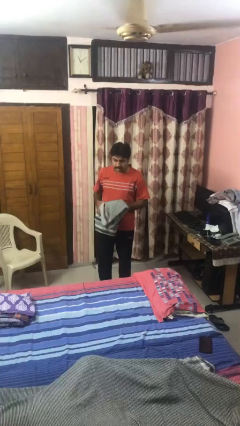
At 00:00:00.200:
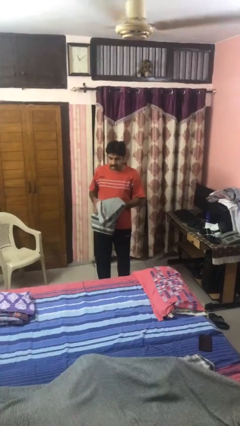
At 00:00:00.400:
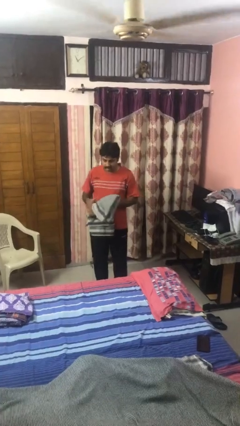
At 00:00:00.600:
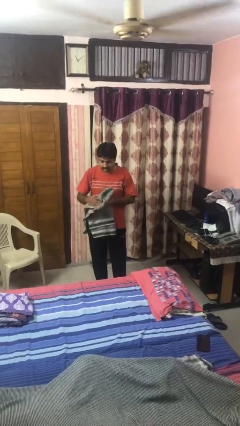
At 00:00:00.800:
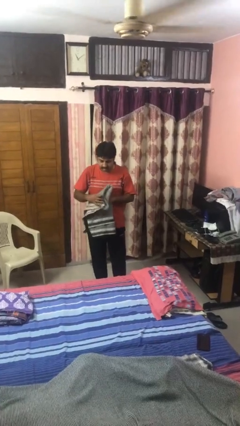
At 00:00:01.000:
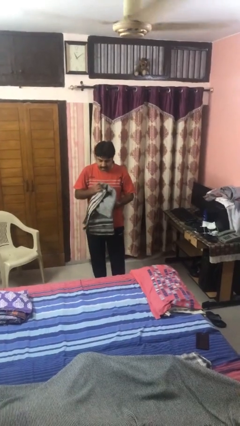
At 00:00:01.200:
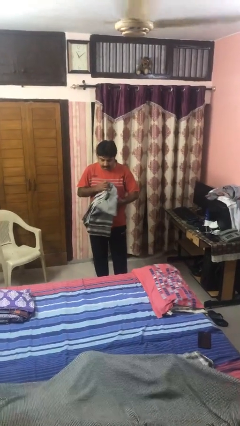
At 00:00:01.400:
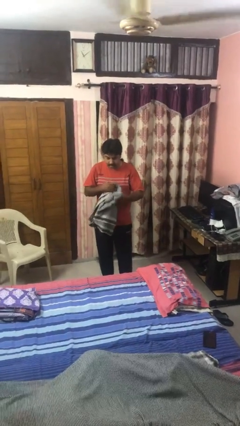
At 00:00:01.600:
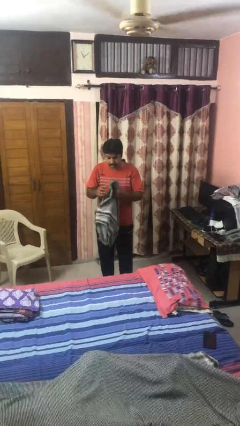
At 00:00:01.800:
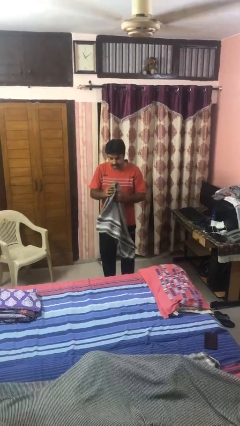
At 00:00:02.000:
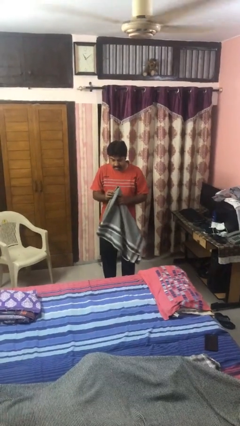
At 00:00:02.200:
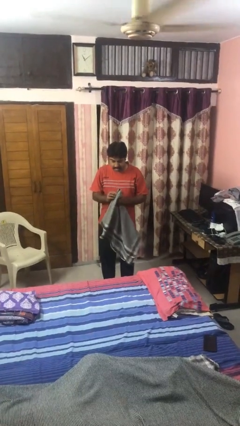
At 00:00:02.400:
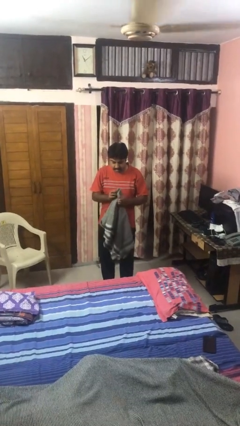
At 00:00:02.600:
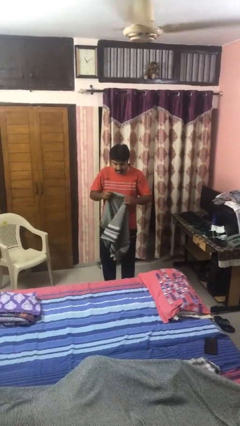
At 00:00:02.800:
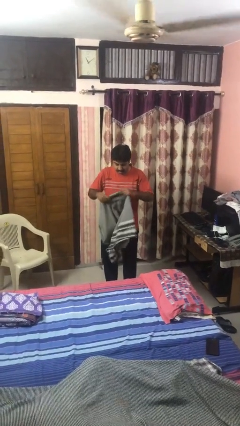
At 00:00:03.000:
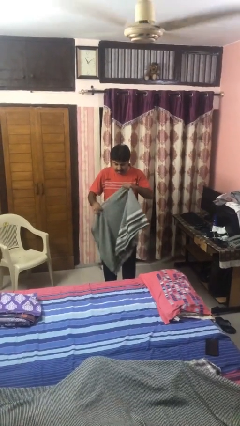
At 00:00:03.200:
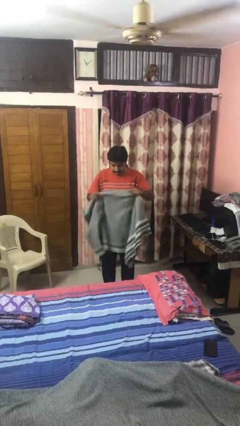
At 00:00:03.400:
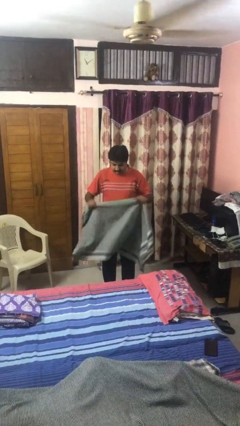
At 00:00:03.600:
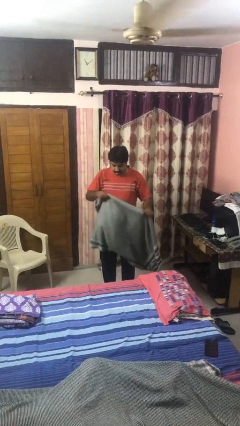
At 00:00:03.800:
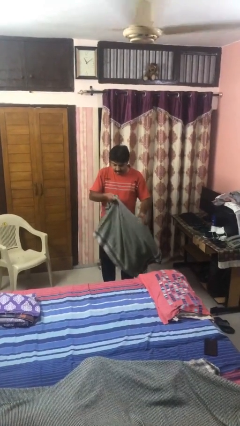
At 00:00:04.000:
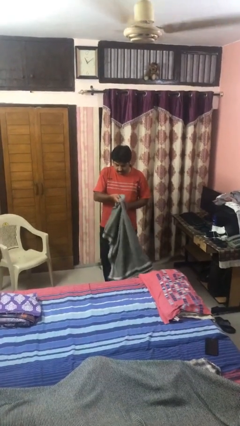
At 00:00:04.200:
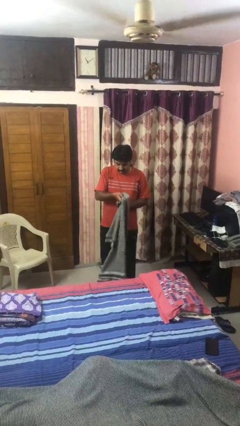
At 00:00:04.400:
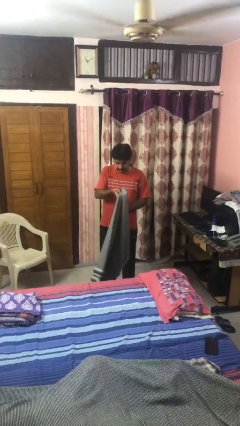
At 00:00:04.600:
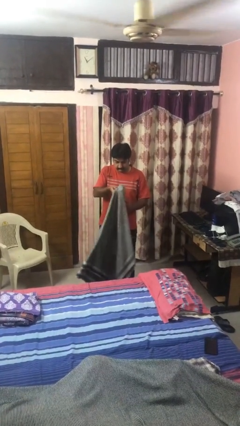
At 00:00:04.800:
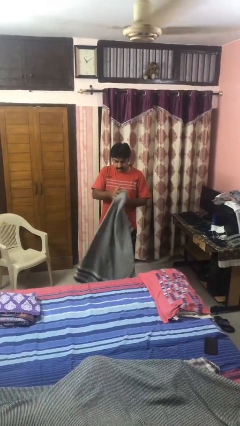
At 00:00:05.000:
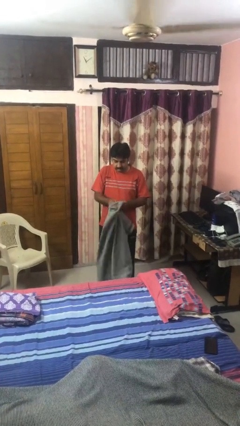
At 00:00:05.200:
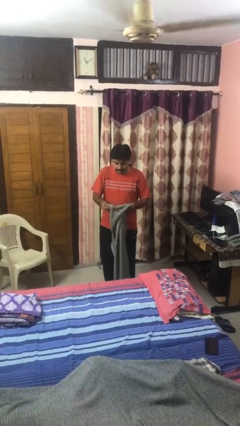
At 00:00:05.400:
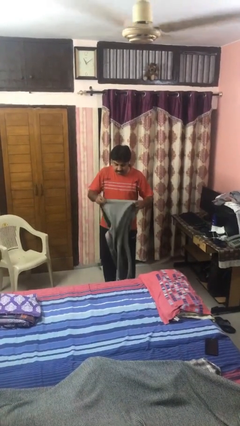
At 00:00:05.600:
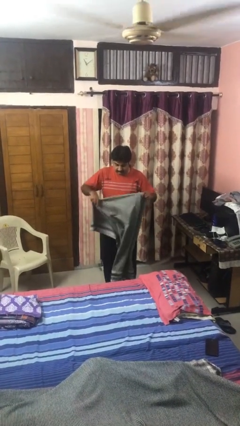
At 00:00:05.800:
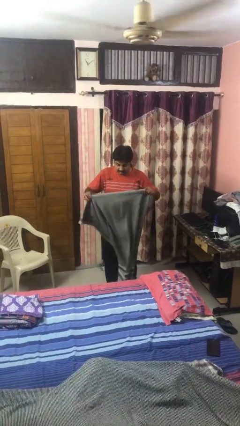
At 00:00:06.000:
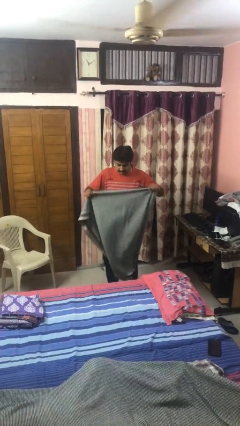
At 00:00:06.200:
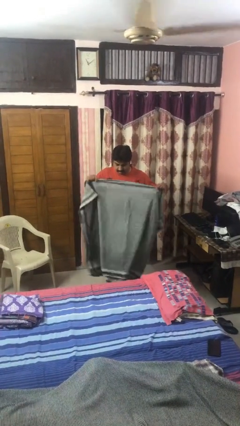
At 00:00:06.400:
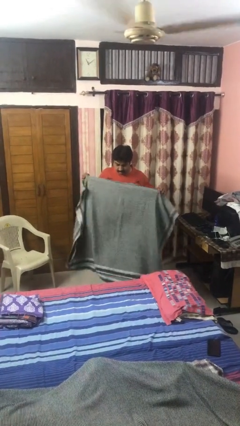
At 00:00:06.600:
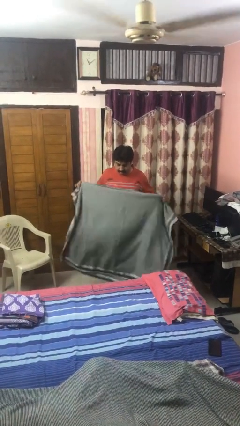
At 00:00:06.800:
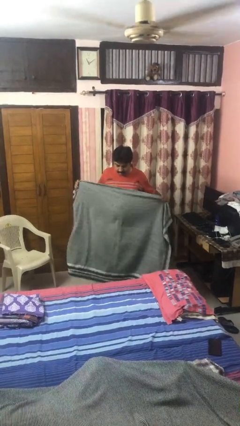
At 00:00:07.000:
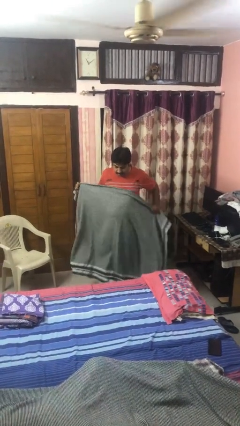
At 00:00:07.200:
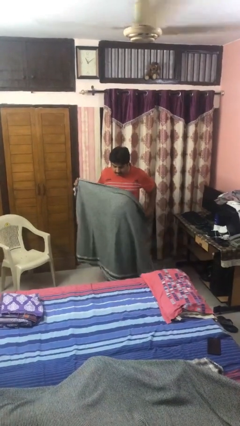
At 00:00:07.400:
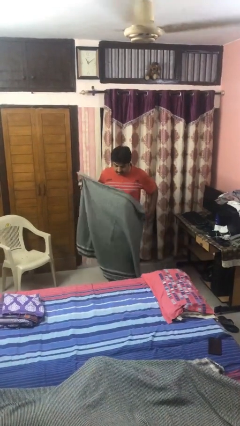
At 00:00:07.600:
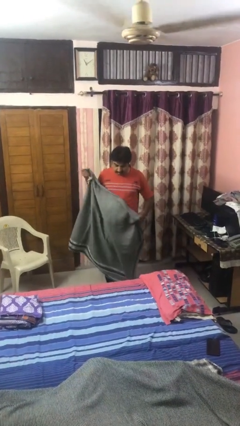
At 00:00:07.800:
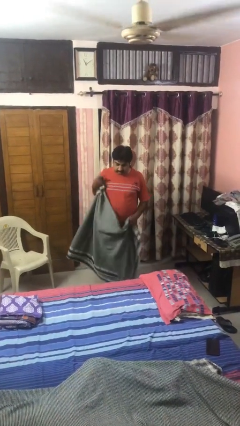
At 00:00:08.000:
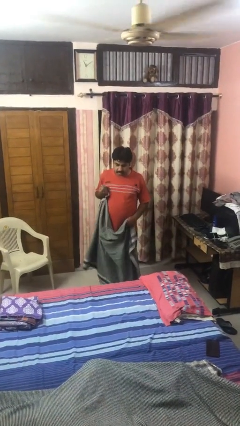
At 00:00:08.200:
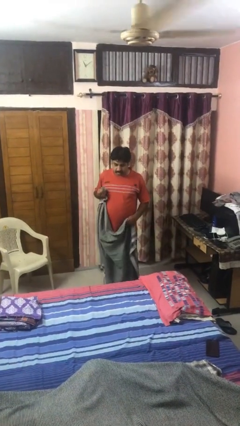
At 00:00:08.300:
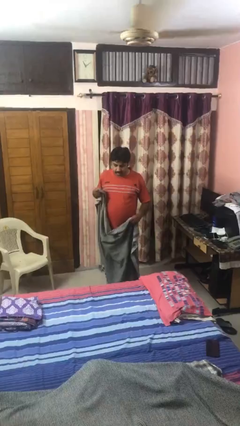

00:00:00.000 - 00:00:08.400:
person unfolds blanket

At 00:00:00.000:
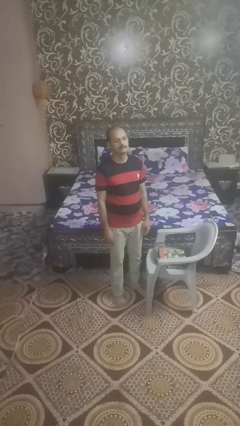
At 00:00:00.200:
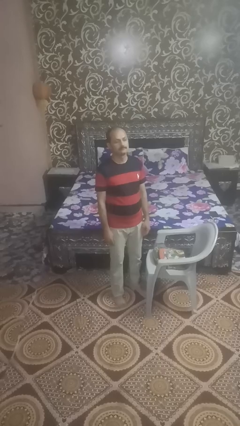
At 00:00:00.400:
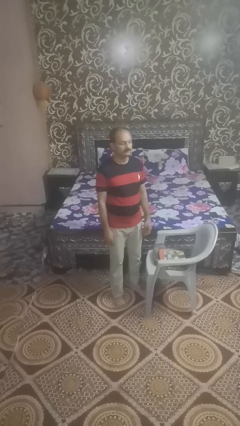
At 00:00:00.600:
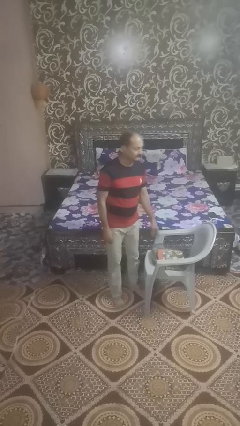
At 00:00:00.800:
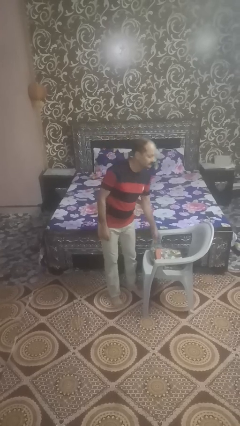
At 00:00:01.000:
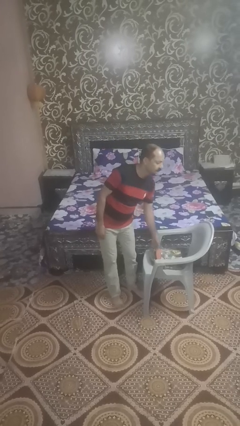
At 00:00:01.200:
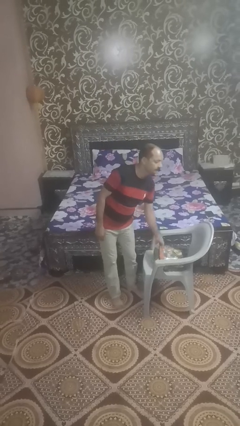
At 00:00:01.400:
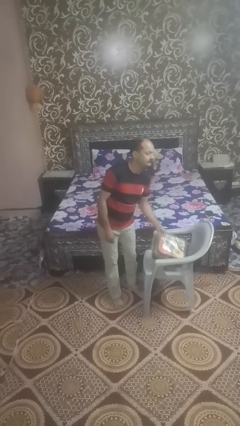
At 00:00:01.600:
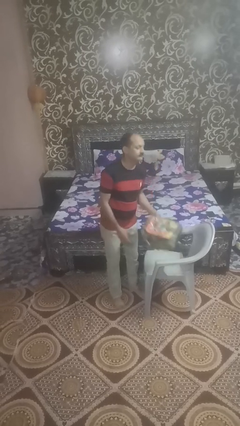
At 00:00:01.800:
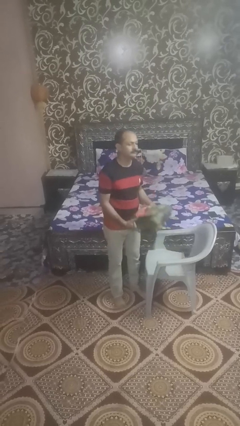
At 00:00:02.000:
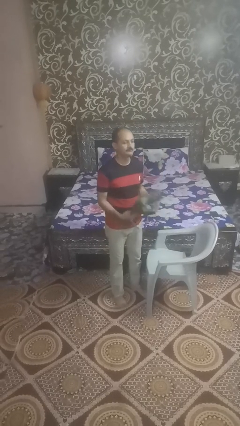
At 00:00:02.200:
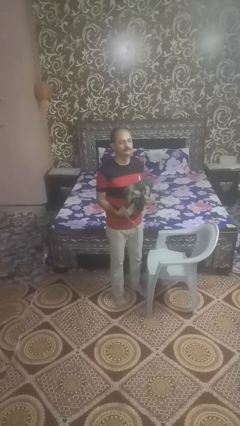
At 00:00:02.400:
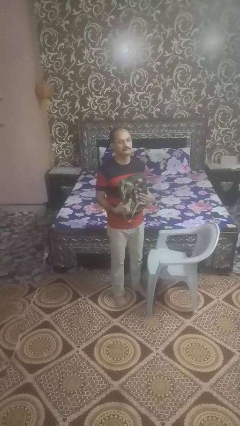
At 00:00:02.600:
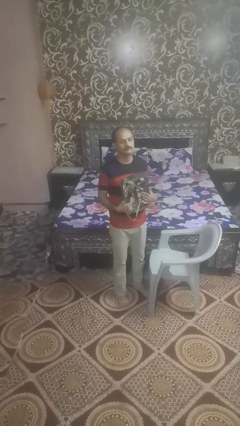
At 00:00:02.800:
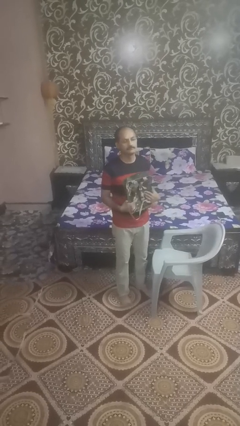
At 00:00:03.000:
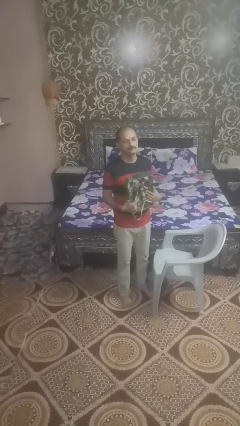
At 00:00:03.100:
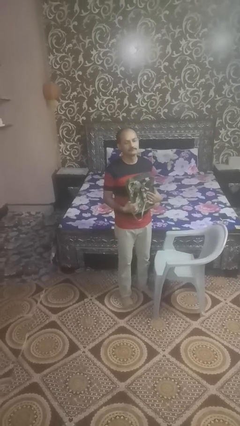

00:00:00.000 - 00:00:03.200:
person picks up object from couch

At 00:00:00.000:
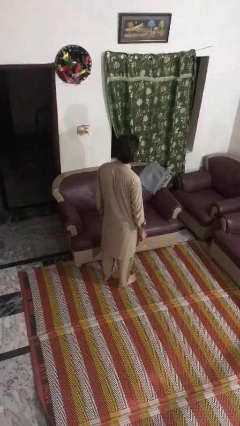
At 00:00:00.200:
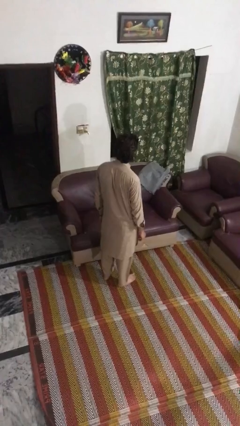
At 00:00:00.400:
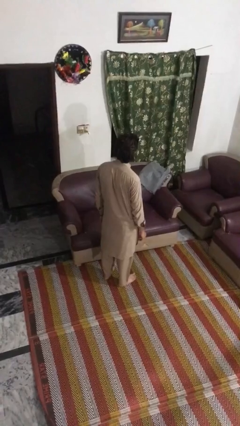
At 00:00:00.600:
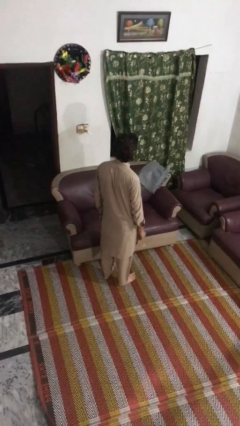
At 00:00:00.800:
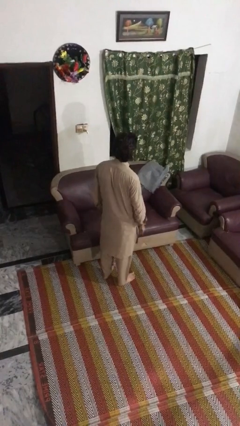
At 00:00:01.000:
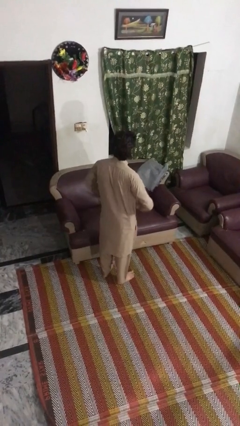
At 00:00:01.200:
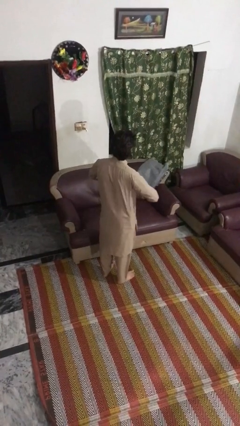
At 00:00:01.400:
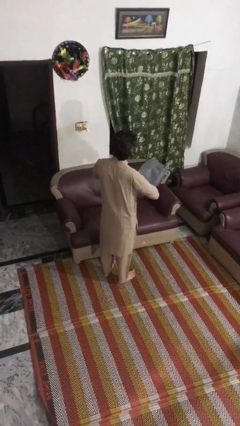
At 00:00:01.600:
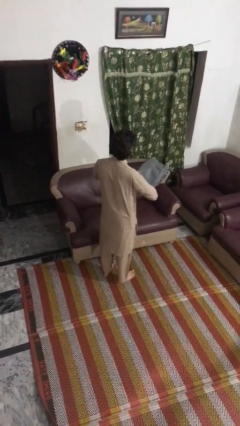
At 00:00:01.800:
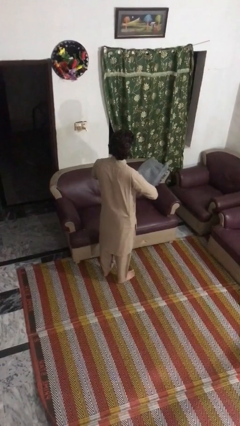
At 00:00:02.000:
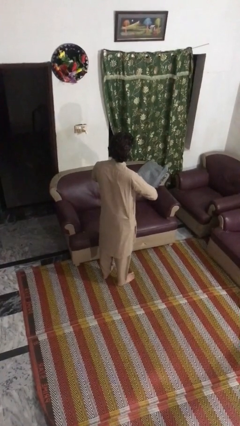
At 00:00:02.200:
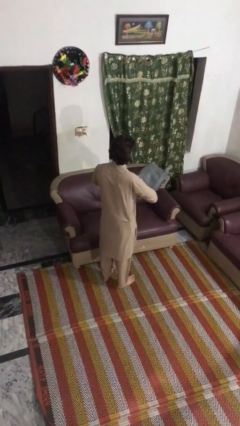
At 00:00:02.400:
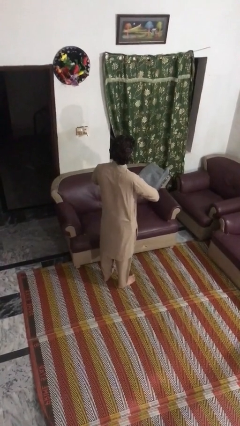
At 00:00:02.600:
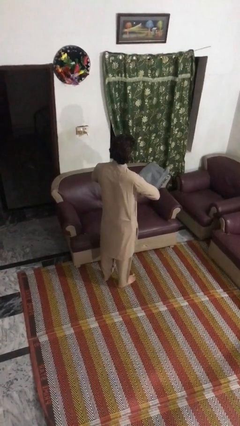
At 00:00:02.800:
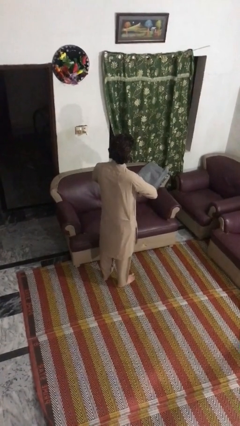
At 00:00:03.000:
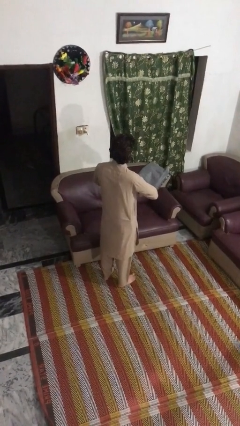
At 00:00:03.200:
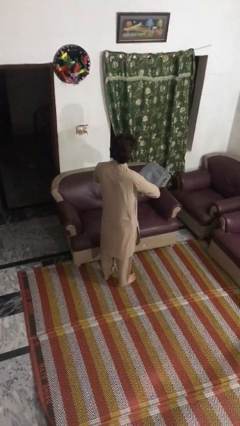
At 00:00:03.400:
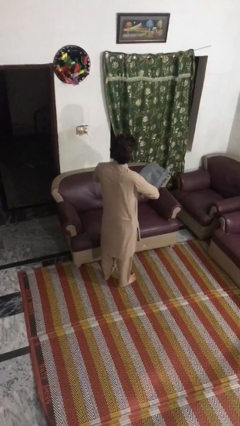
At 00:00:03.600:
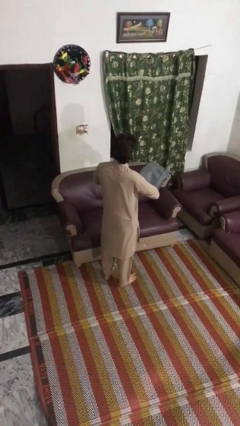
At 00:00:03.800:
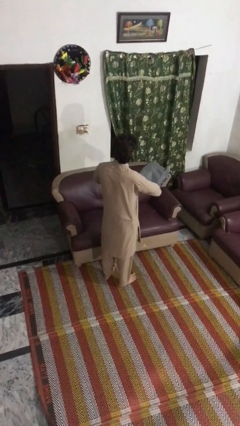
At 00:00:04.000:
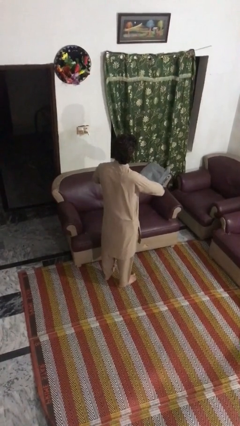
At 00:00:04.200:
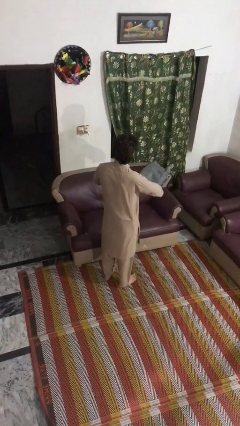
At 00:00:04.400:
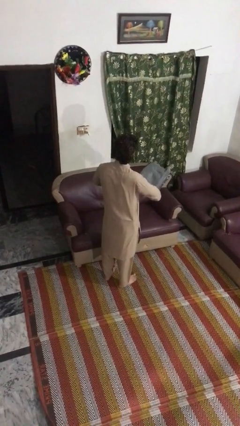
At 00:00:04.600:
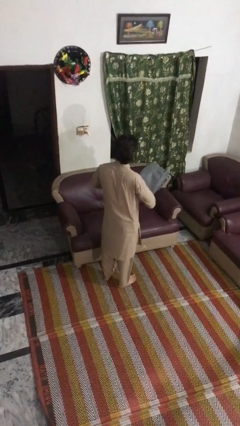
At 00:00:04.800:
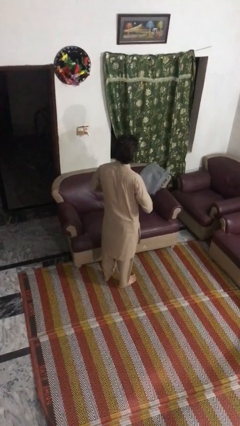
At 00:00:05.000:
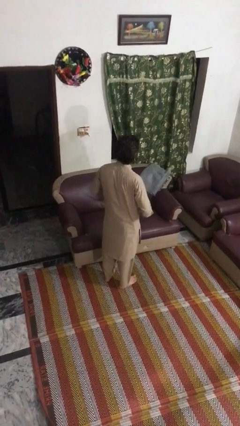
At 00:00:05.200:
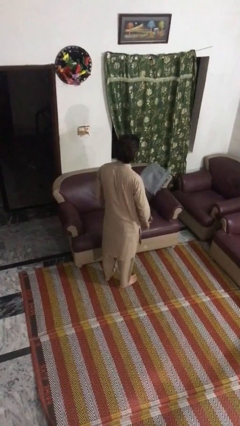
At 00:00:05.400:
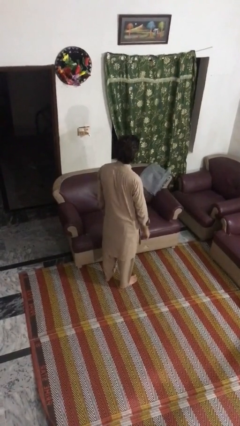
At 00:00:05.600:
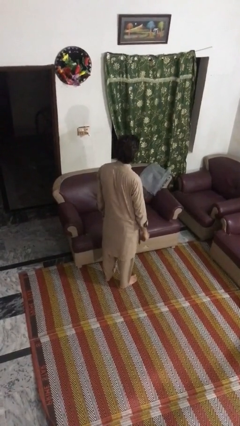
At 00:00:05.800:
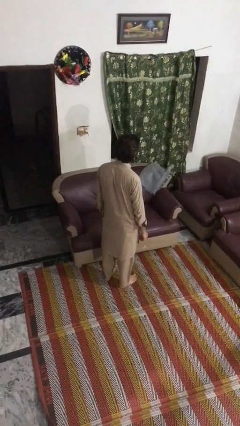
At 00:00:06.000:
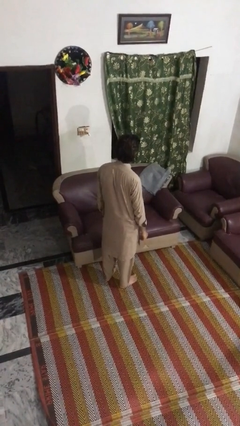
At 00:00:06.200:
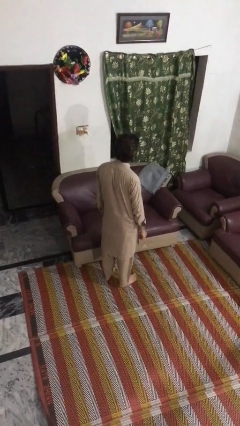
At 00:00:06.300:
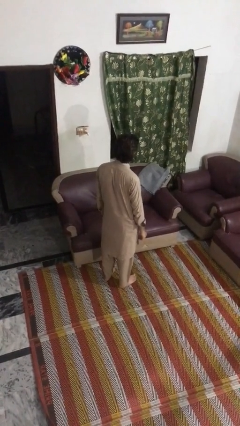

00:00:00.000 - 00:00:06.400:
person cracks knuckles
